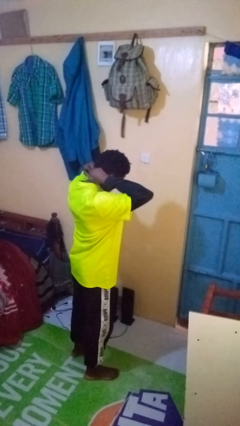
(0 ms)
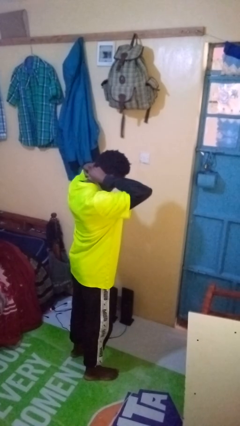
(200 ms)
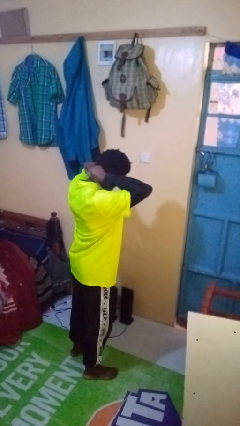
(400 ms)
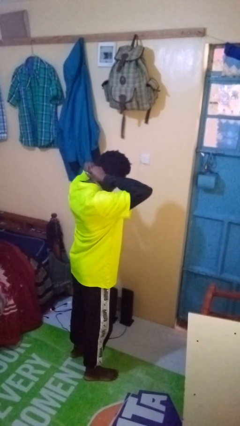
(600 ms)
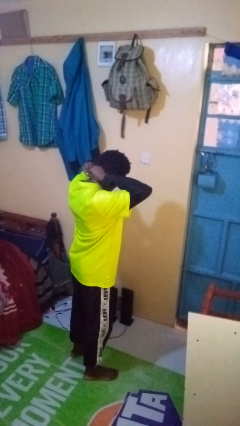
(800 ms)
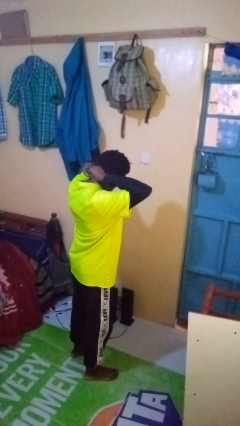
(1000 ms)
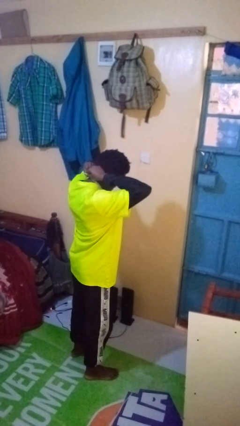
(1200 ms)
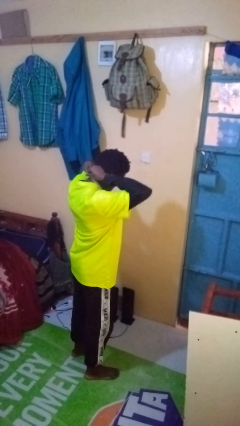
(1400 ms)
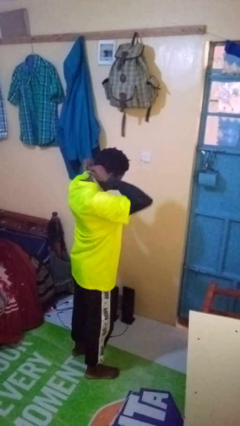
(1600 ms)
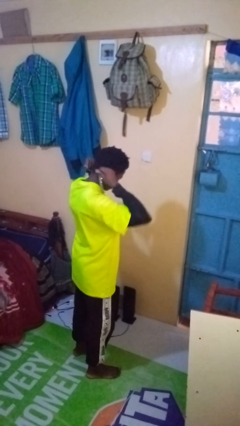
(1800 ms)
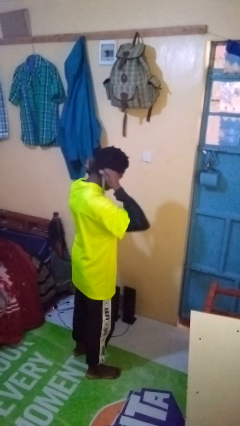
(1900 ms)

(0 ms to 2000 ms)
person takes off necklace

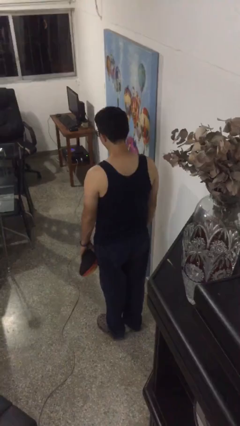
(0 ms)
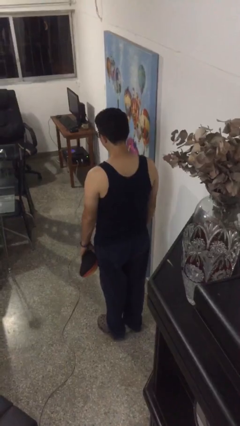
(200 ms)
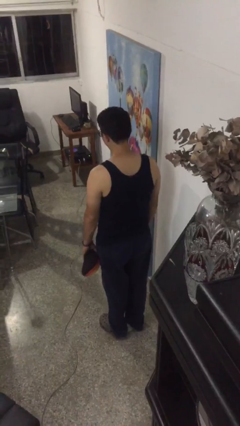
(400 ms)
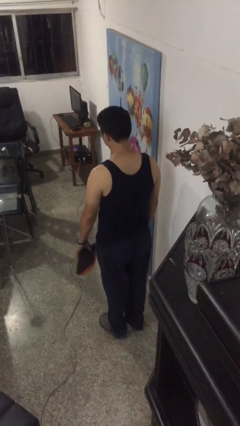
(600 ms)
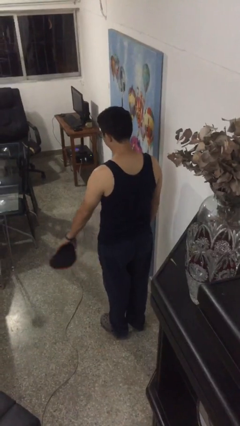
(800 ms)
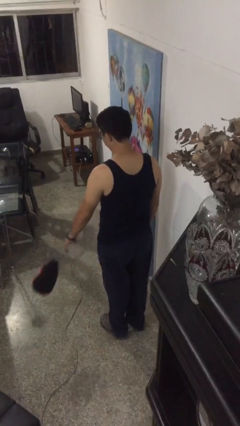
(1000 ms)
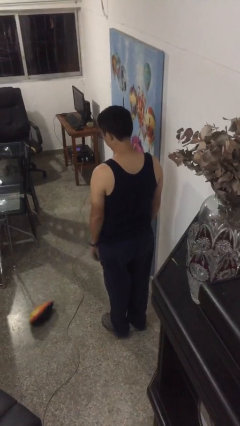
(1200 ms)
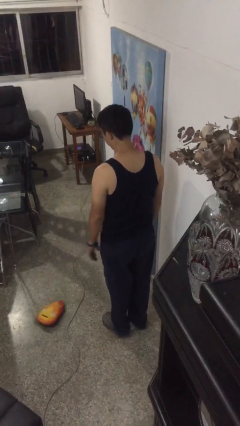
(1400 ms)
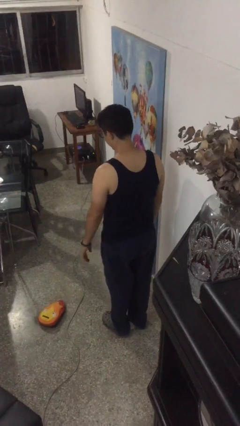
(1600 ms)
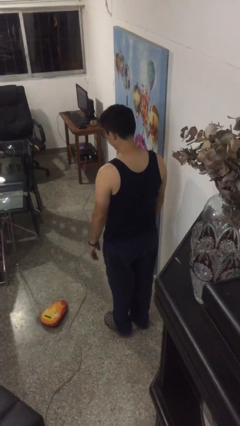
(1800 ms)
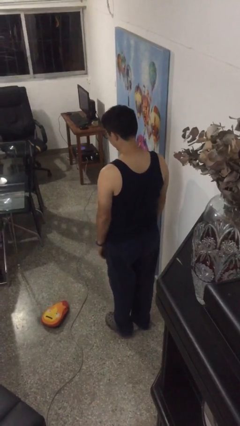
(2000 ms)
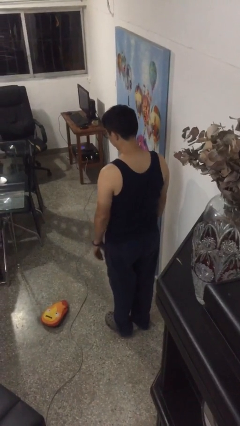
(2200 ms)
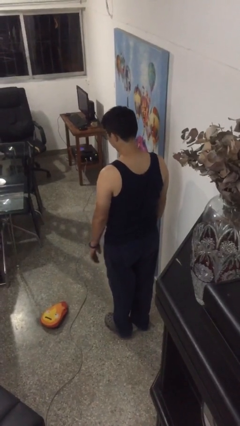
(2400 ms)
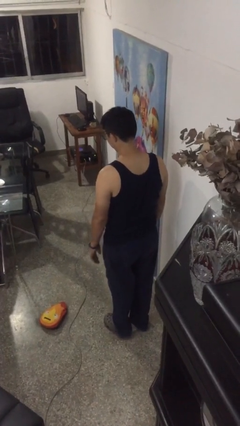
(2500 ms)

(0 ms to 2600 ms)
person throws object to ground

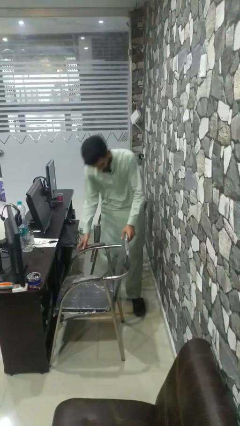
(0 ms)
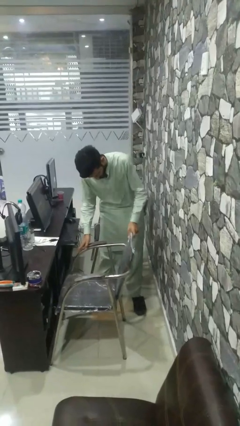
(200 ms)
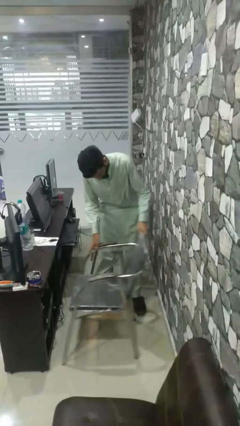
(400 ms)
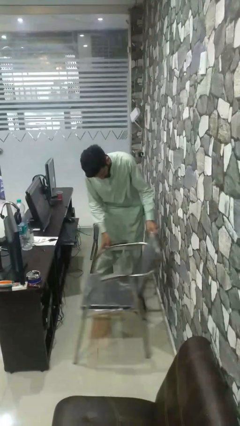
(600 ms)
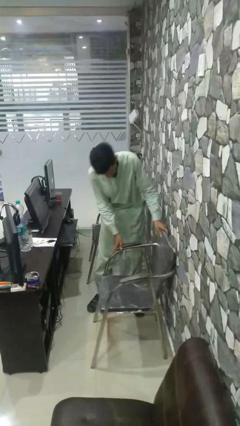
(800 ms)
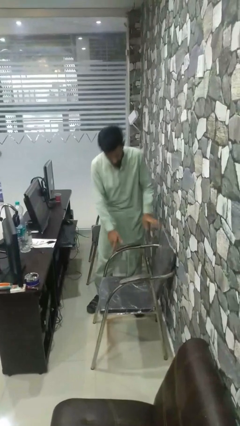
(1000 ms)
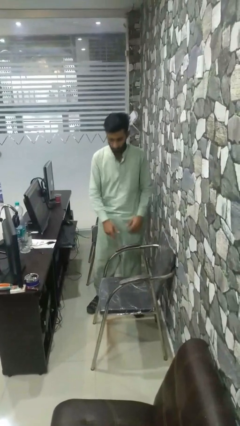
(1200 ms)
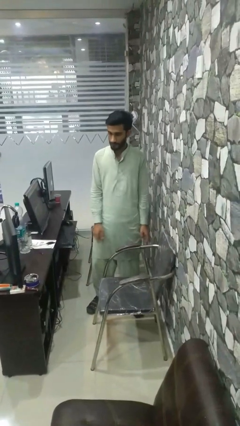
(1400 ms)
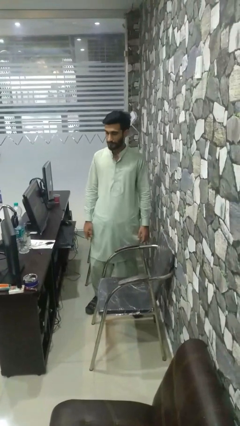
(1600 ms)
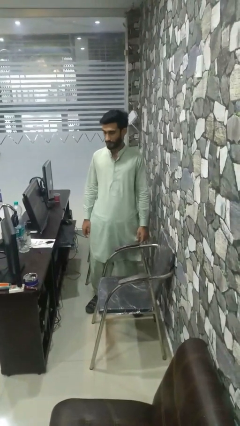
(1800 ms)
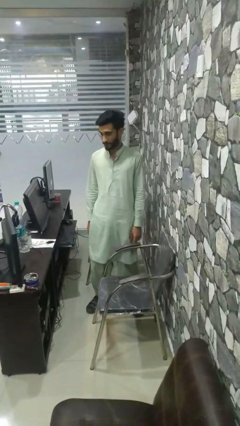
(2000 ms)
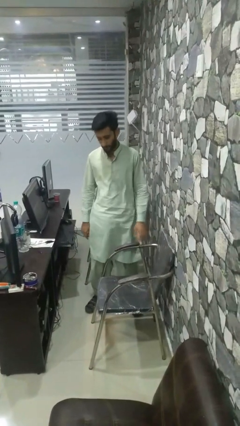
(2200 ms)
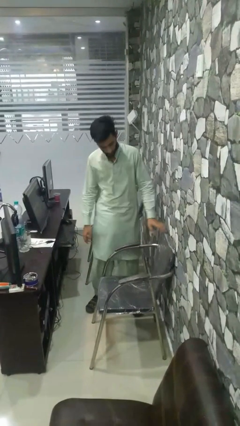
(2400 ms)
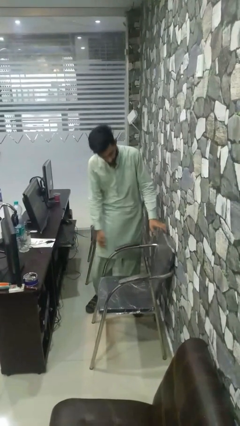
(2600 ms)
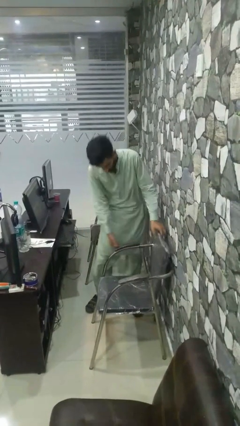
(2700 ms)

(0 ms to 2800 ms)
person pulls out chair

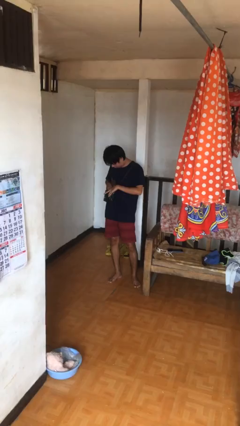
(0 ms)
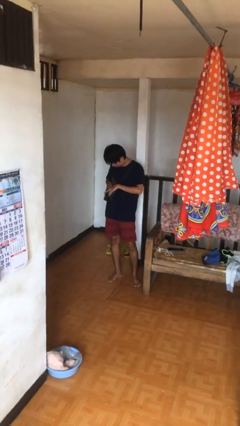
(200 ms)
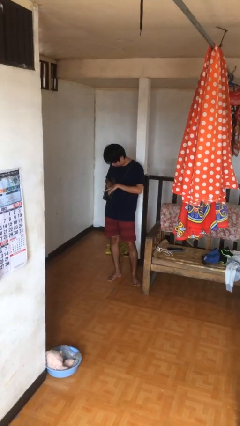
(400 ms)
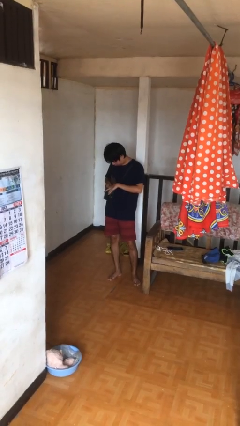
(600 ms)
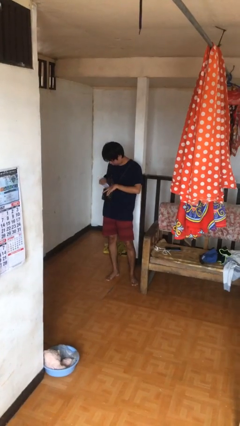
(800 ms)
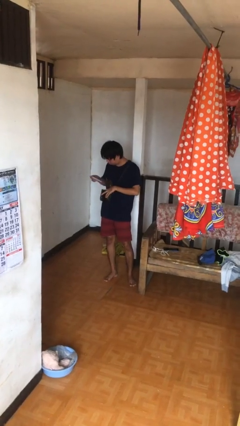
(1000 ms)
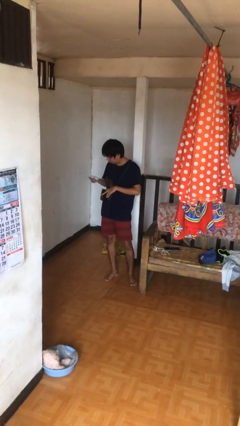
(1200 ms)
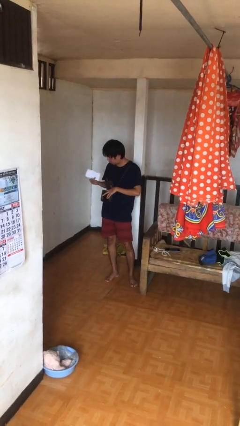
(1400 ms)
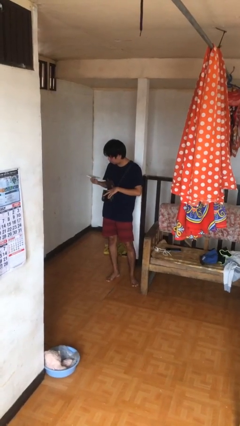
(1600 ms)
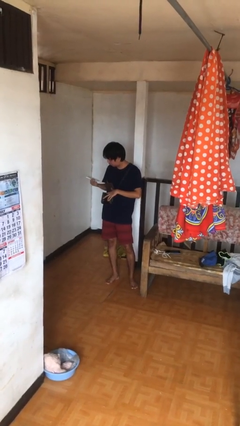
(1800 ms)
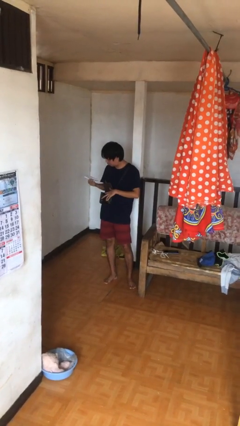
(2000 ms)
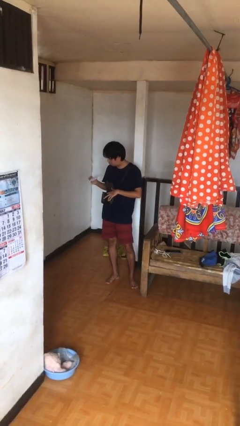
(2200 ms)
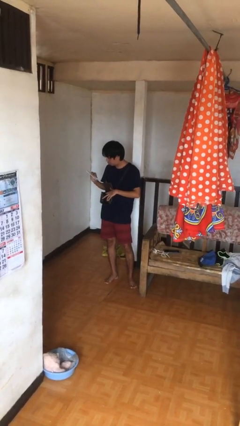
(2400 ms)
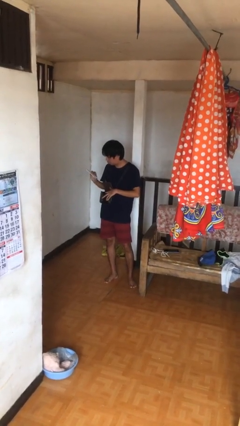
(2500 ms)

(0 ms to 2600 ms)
person takes object from purse

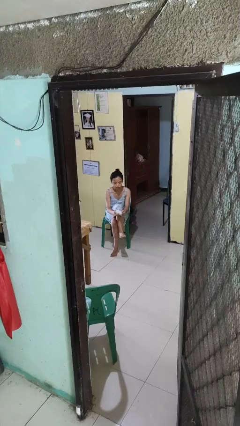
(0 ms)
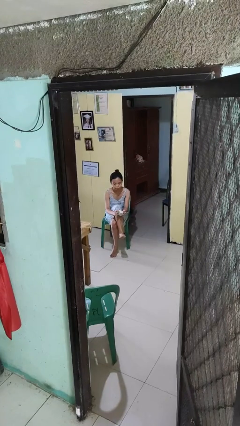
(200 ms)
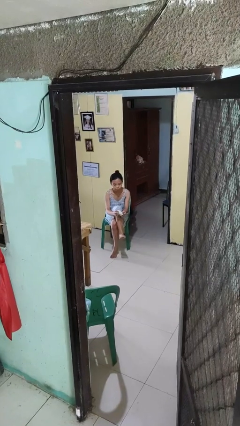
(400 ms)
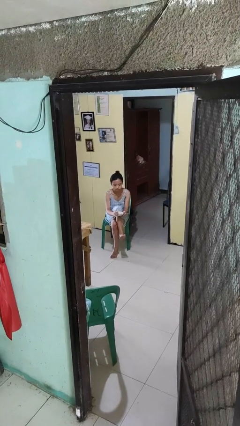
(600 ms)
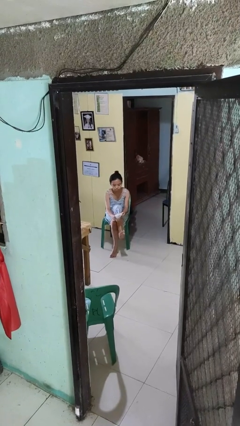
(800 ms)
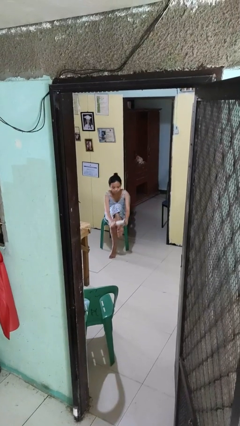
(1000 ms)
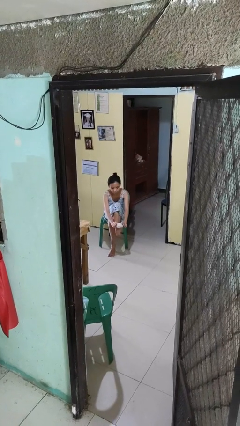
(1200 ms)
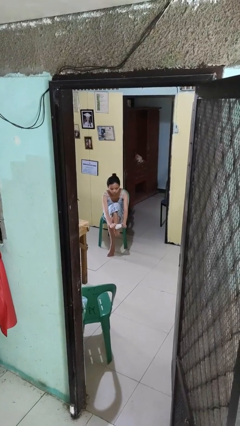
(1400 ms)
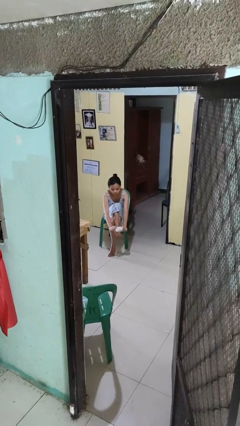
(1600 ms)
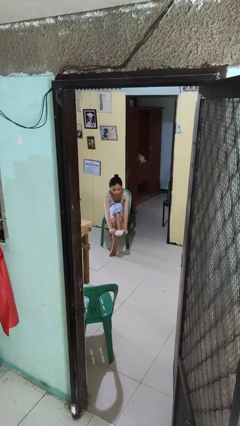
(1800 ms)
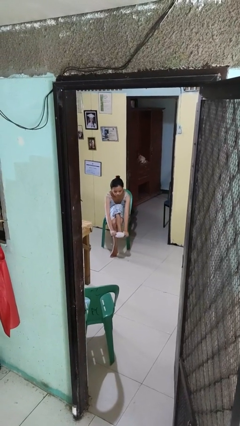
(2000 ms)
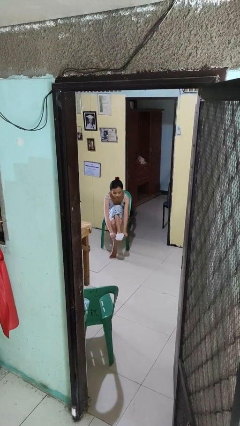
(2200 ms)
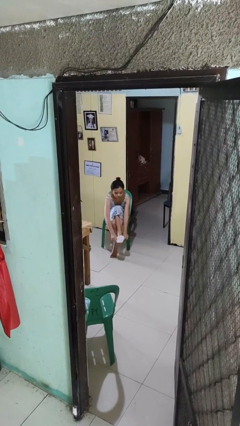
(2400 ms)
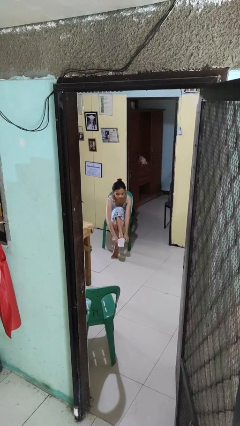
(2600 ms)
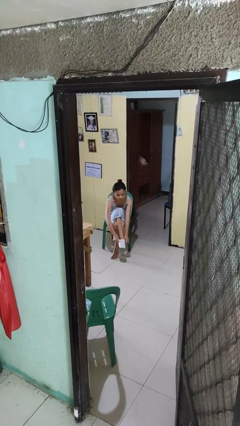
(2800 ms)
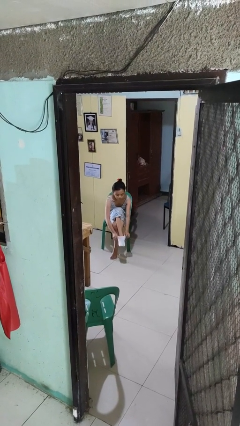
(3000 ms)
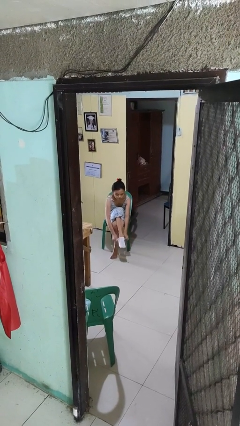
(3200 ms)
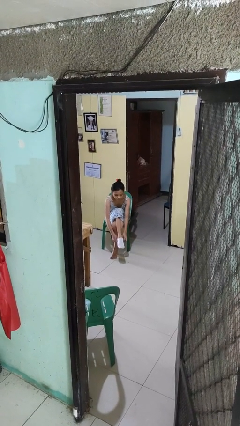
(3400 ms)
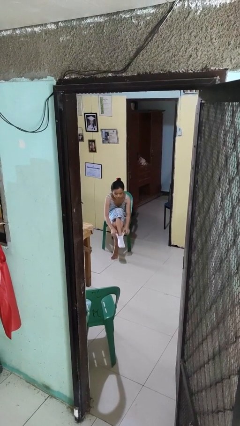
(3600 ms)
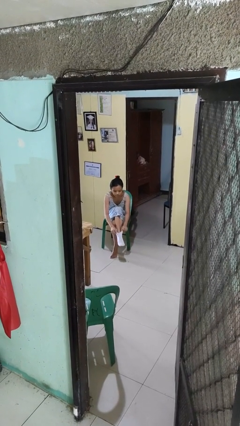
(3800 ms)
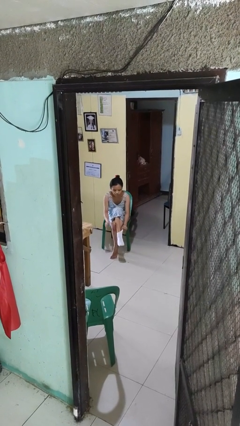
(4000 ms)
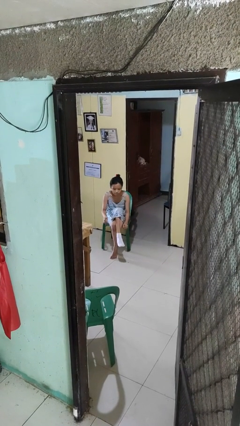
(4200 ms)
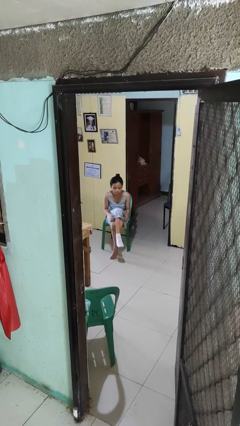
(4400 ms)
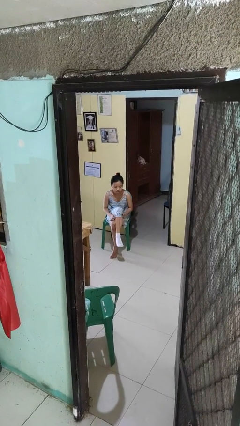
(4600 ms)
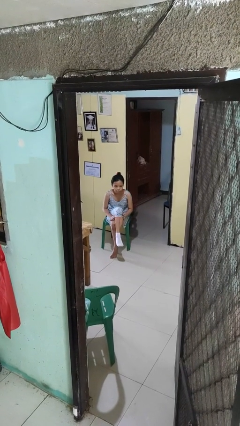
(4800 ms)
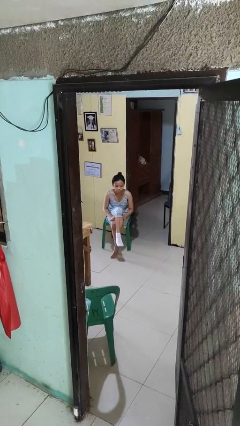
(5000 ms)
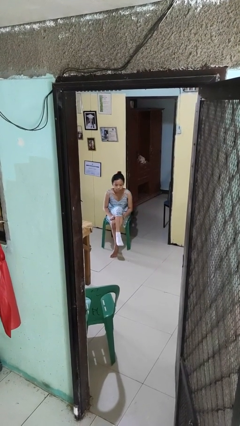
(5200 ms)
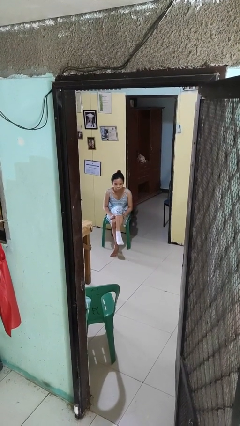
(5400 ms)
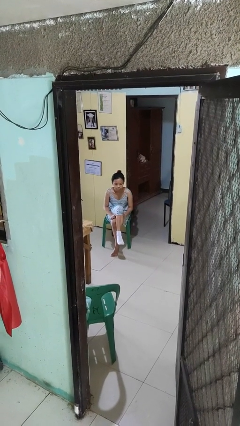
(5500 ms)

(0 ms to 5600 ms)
person puts on socks

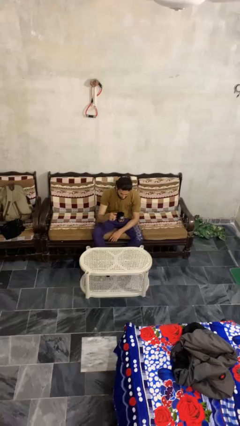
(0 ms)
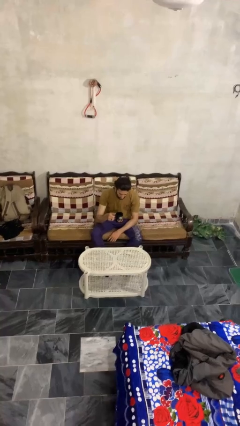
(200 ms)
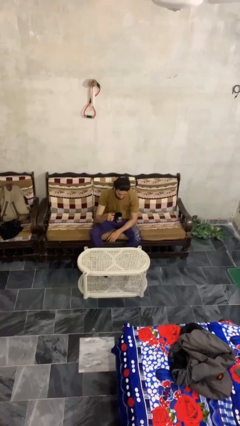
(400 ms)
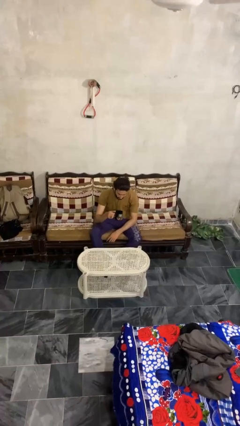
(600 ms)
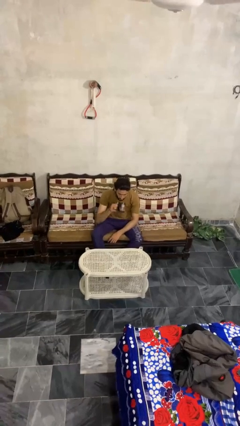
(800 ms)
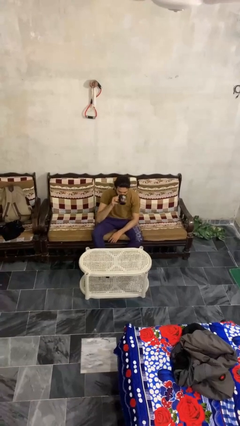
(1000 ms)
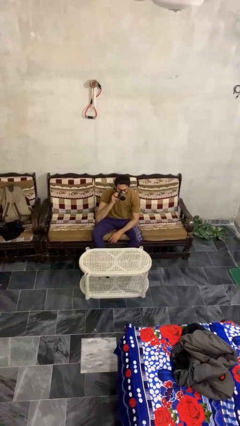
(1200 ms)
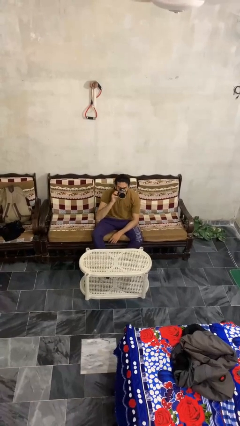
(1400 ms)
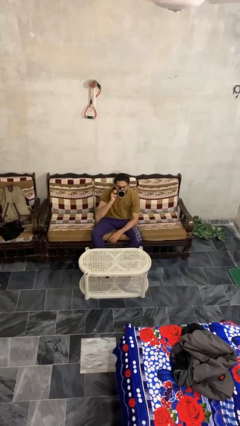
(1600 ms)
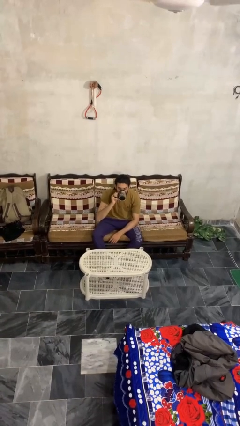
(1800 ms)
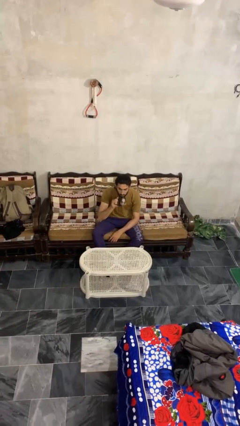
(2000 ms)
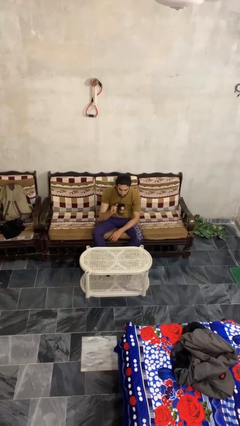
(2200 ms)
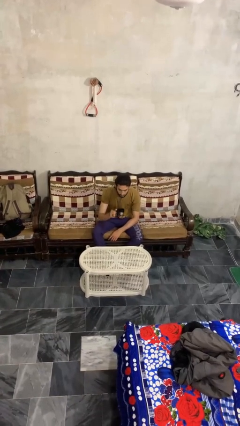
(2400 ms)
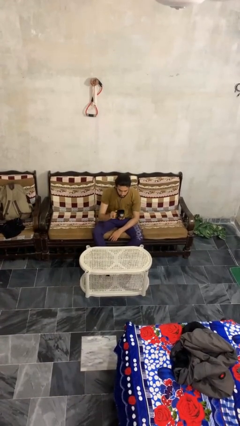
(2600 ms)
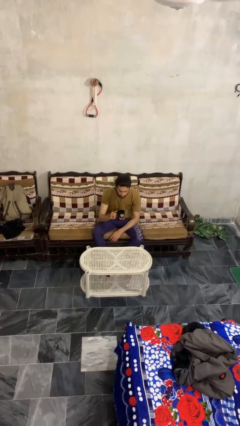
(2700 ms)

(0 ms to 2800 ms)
person drinks from mug
